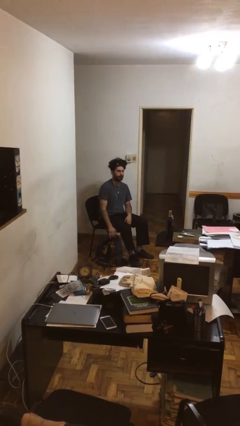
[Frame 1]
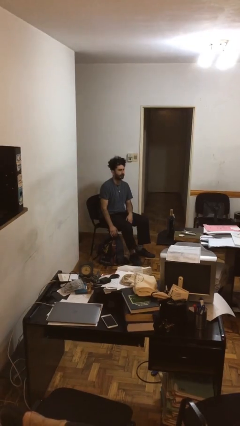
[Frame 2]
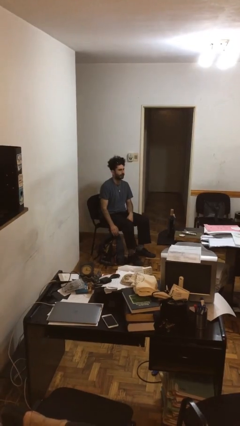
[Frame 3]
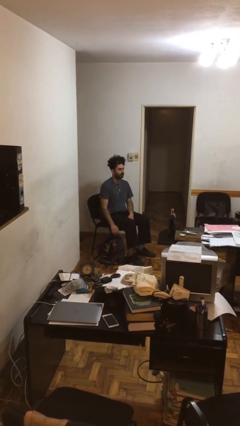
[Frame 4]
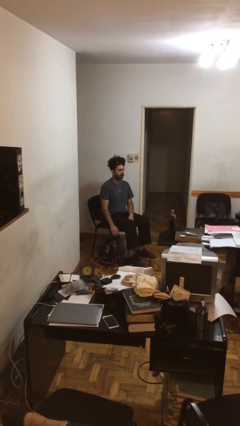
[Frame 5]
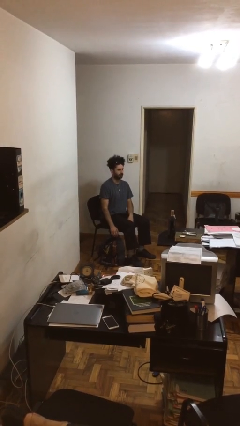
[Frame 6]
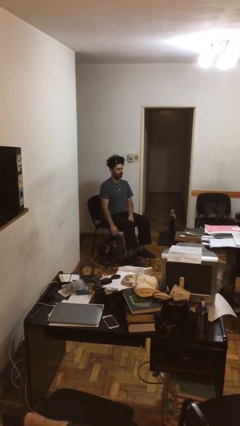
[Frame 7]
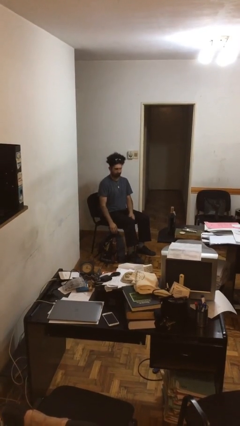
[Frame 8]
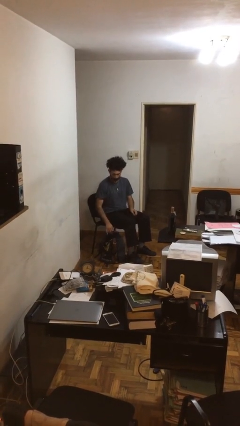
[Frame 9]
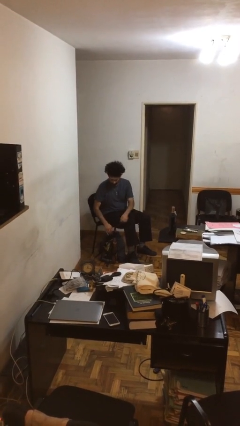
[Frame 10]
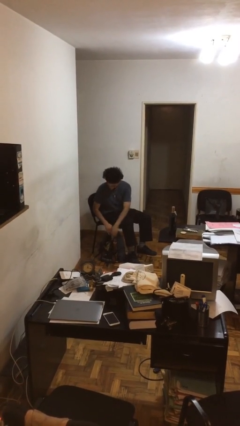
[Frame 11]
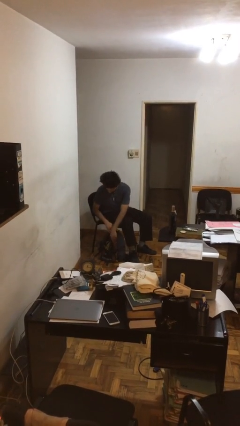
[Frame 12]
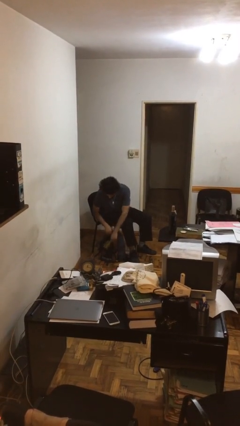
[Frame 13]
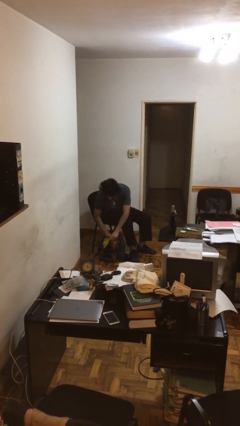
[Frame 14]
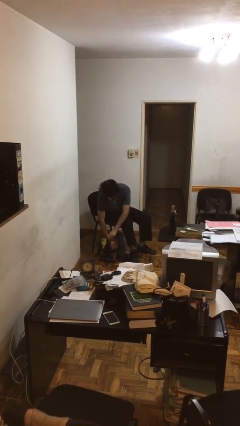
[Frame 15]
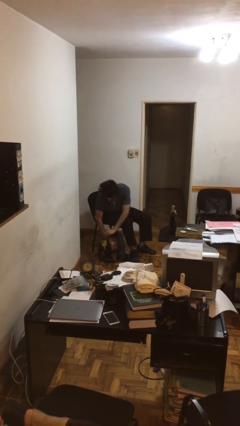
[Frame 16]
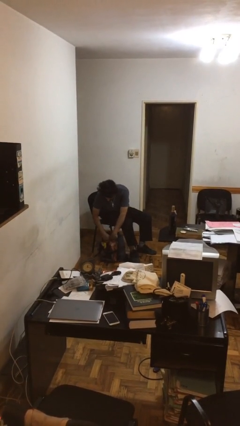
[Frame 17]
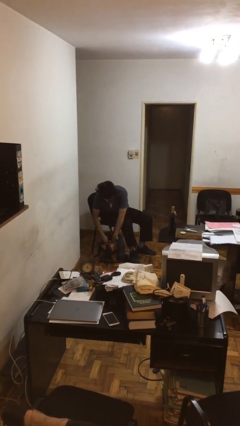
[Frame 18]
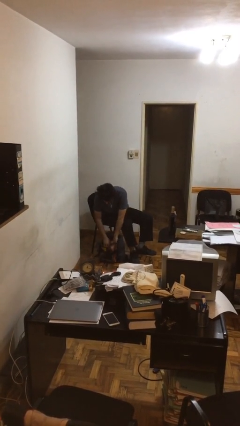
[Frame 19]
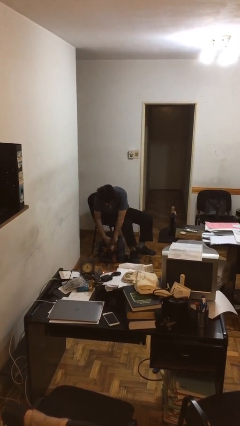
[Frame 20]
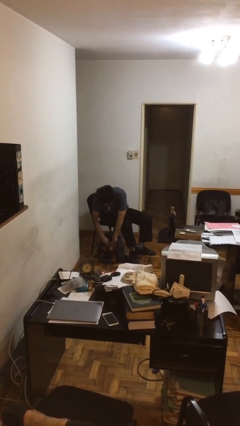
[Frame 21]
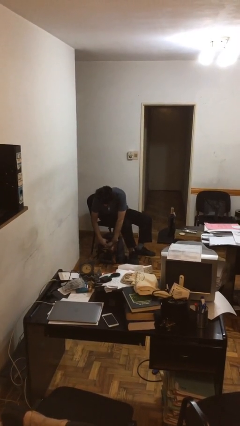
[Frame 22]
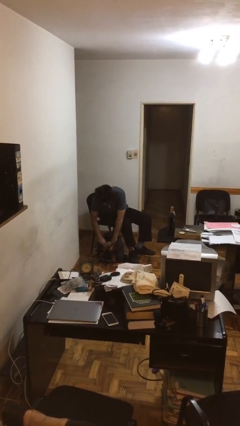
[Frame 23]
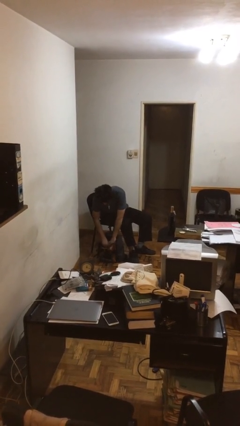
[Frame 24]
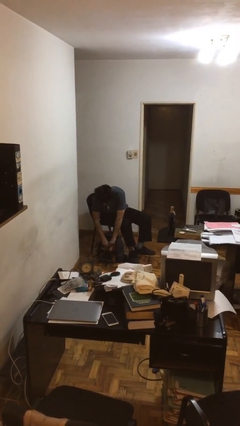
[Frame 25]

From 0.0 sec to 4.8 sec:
person searches in backpack

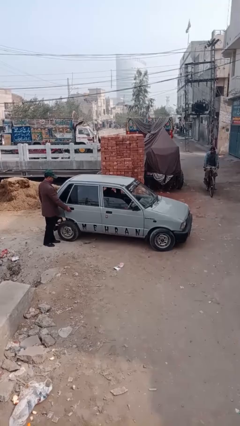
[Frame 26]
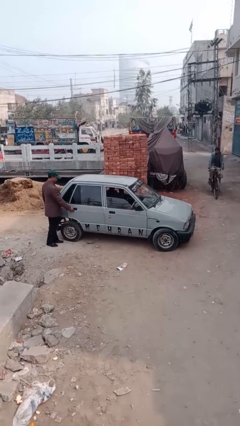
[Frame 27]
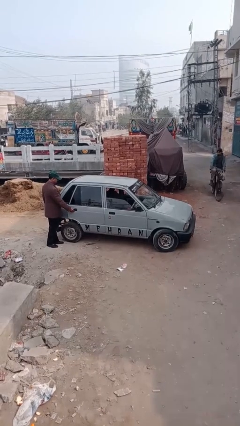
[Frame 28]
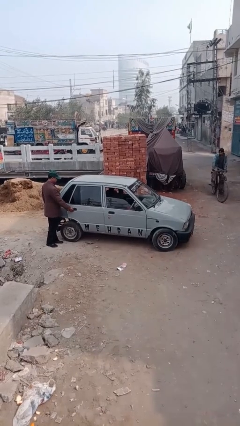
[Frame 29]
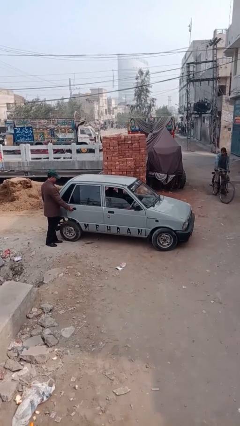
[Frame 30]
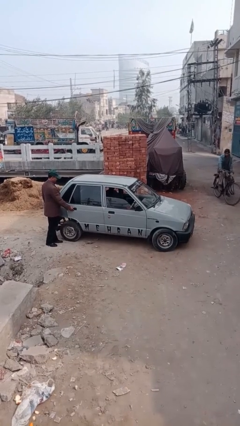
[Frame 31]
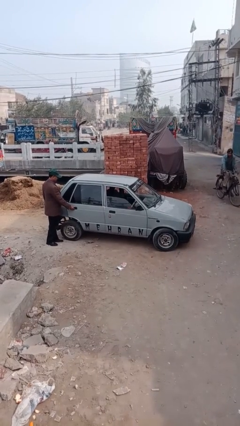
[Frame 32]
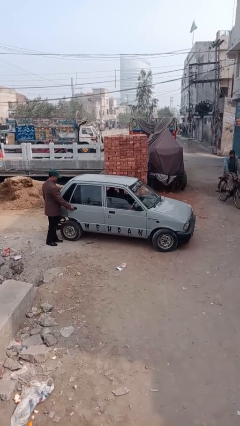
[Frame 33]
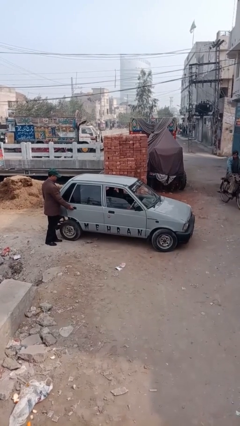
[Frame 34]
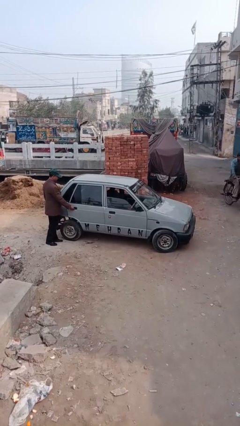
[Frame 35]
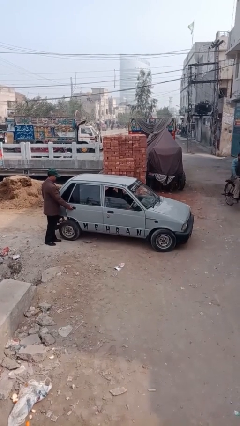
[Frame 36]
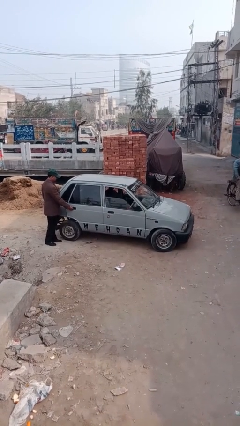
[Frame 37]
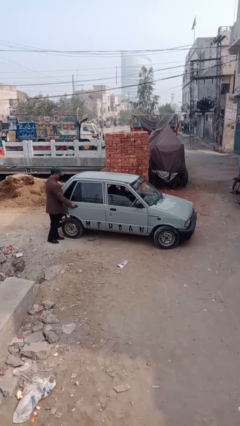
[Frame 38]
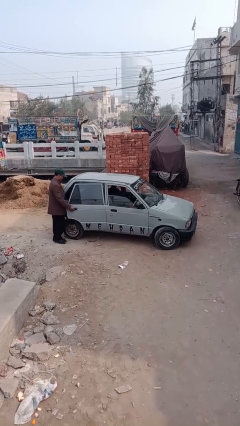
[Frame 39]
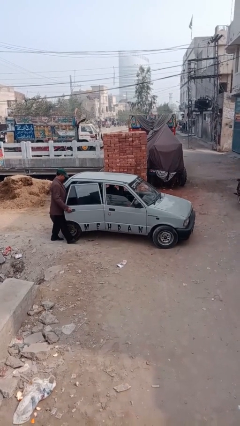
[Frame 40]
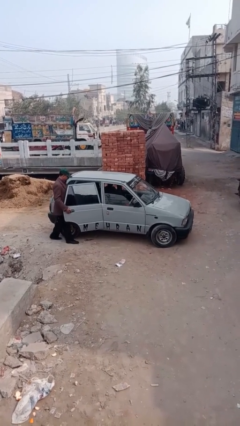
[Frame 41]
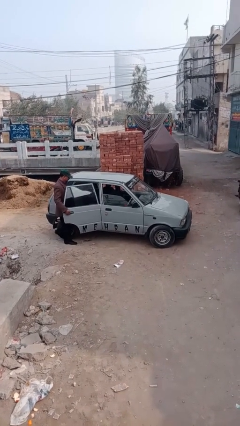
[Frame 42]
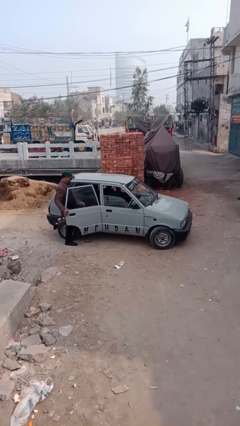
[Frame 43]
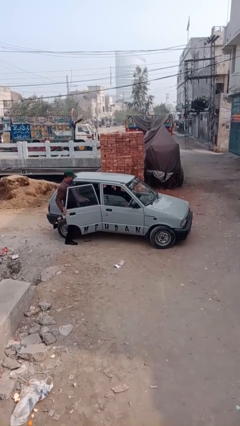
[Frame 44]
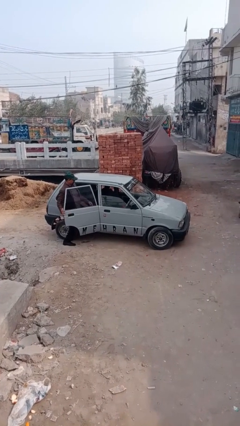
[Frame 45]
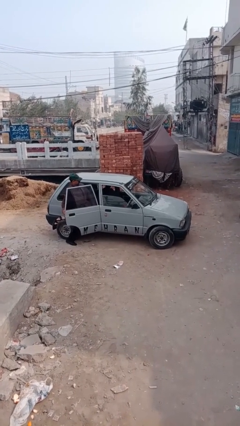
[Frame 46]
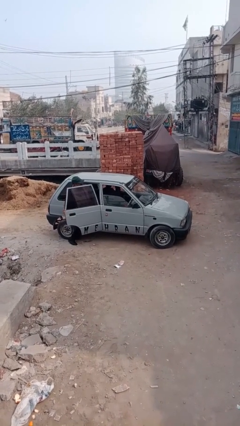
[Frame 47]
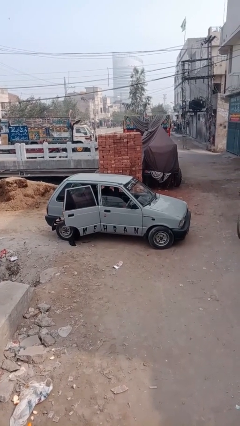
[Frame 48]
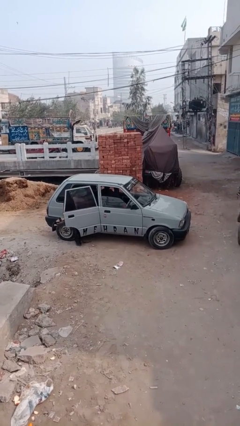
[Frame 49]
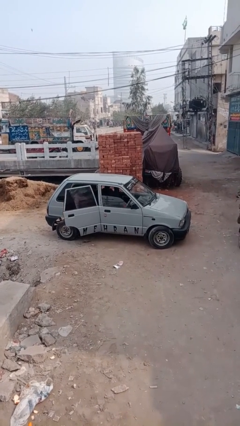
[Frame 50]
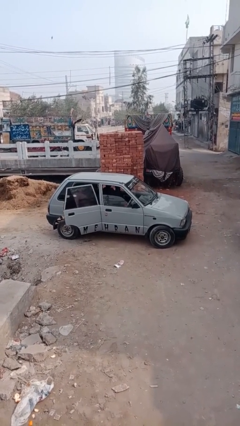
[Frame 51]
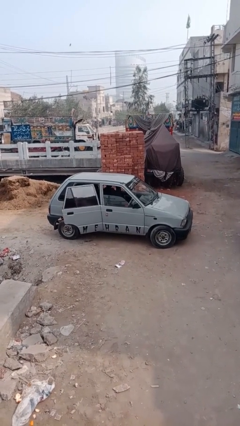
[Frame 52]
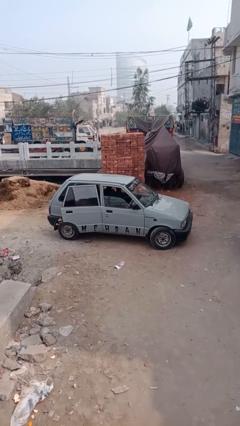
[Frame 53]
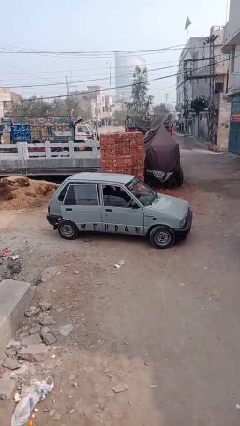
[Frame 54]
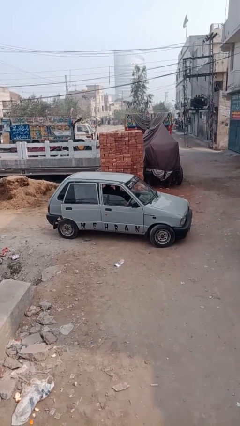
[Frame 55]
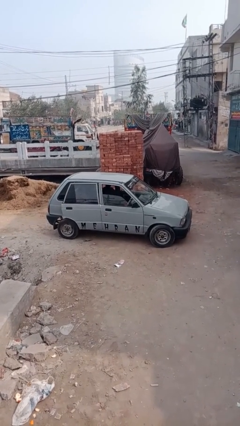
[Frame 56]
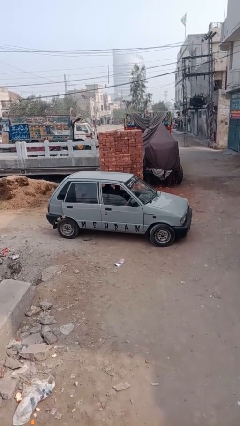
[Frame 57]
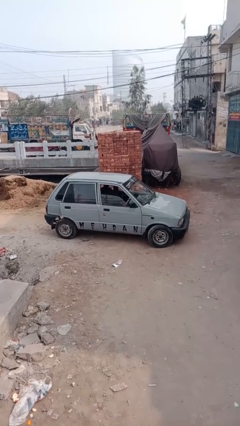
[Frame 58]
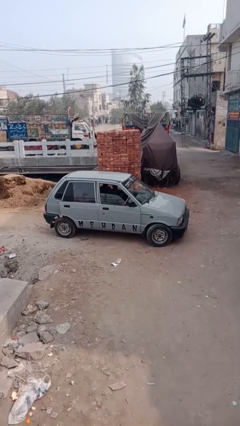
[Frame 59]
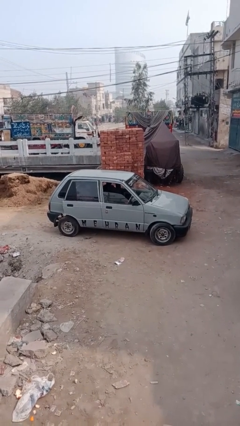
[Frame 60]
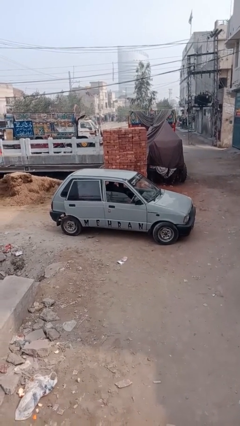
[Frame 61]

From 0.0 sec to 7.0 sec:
car picks up person

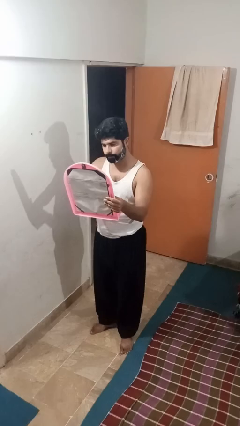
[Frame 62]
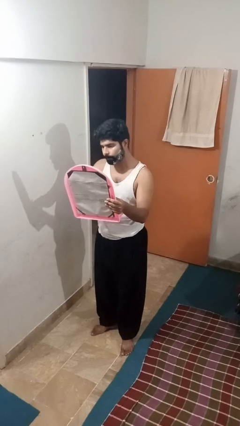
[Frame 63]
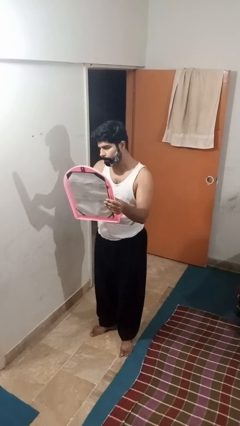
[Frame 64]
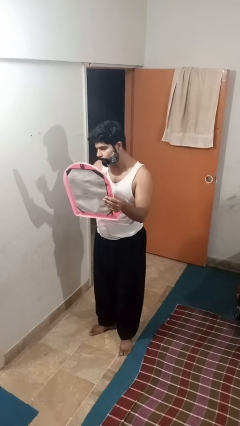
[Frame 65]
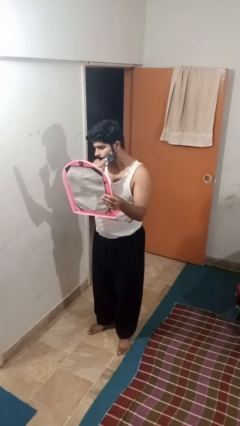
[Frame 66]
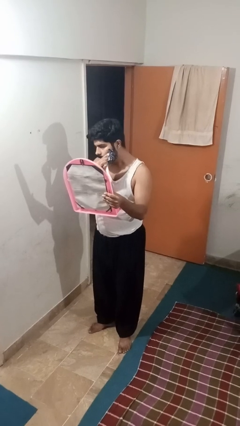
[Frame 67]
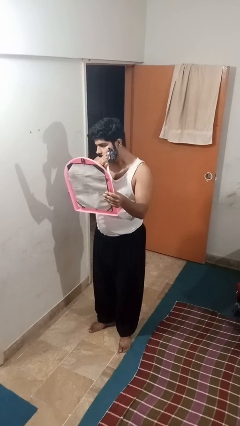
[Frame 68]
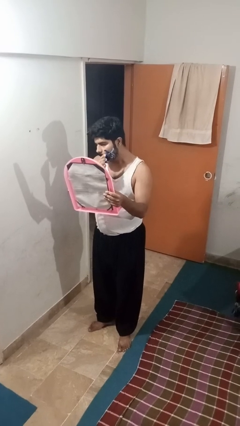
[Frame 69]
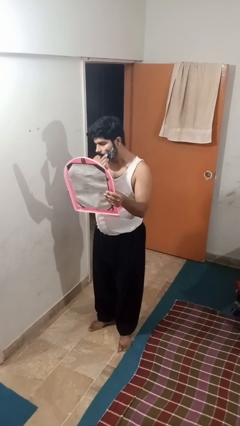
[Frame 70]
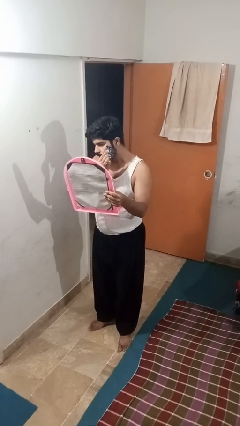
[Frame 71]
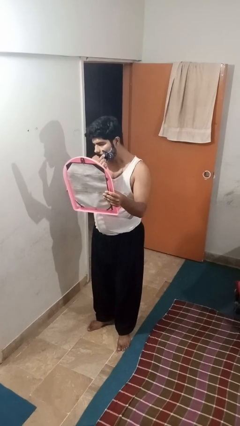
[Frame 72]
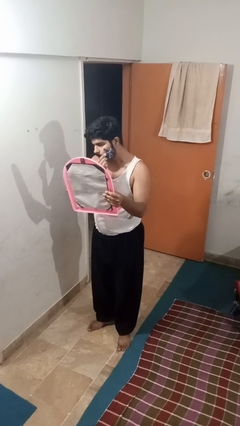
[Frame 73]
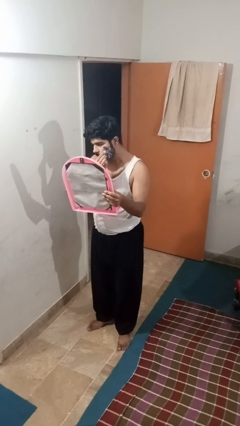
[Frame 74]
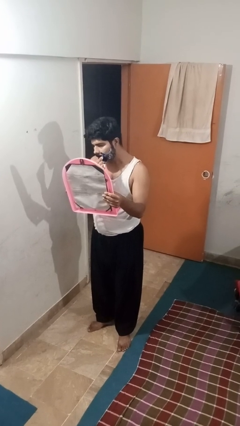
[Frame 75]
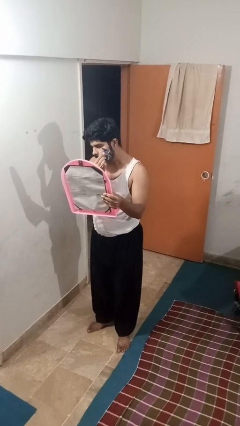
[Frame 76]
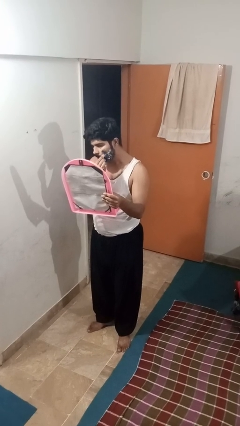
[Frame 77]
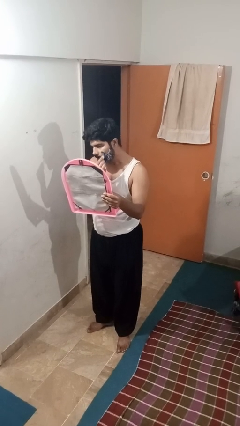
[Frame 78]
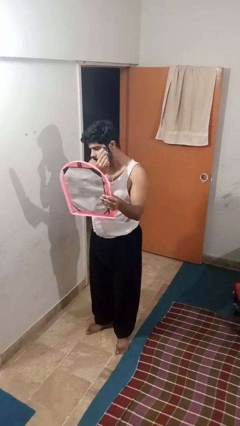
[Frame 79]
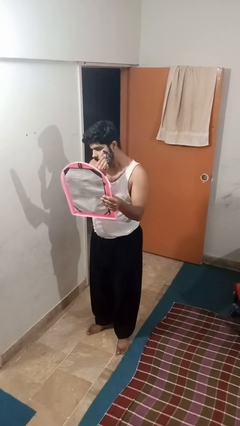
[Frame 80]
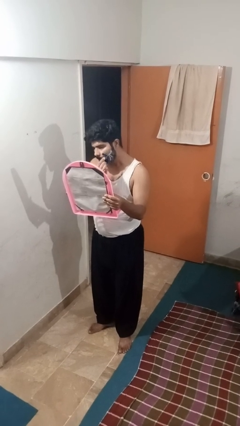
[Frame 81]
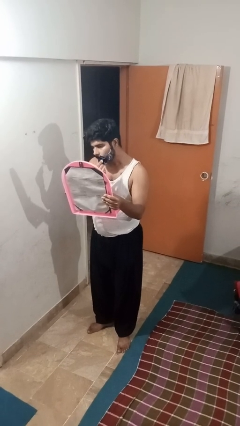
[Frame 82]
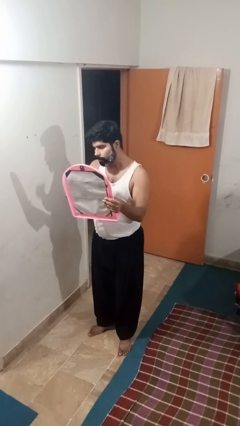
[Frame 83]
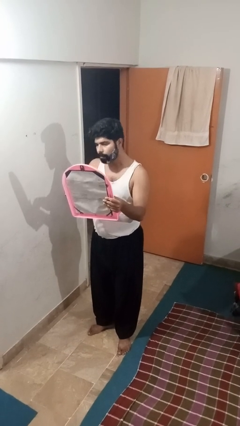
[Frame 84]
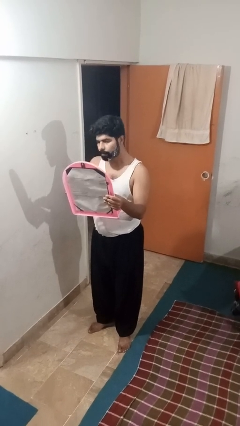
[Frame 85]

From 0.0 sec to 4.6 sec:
person shaves face

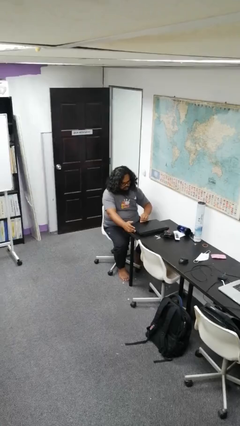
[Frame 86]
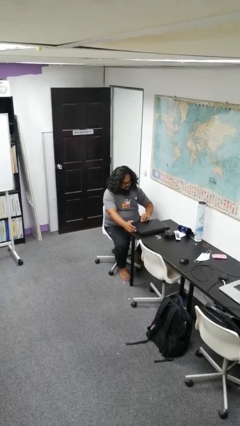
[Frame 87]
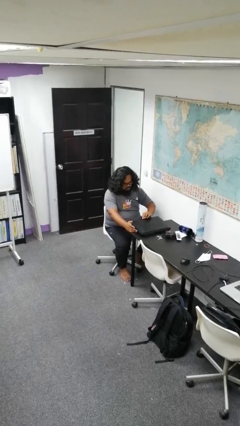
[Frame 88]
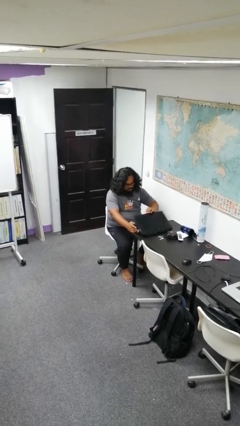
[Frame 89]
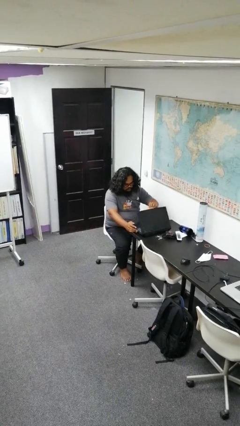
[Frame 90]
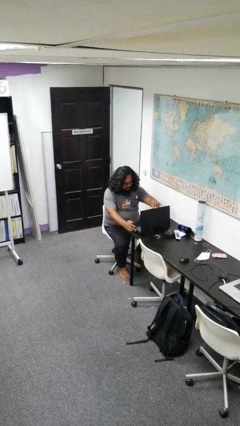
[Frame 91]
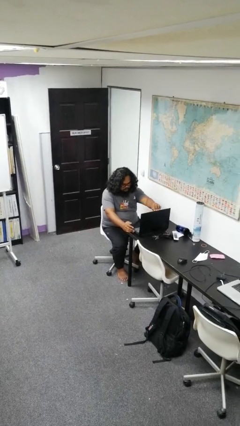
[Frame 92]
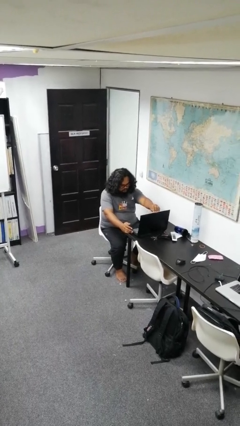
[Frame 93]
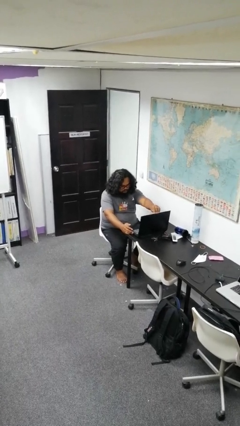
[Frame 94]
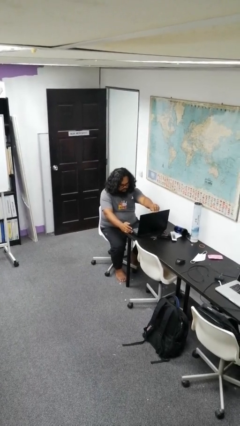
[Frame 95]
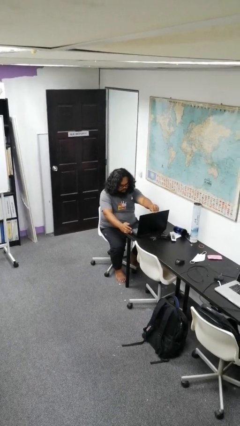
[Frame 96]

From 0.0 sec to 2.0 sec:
person opens laptop
